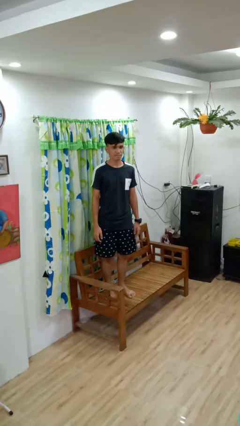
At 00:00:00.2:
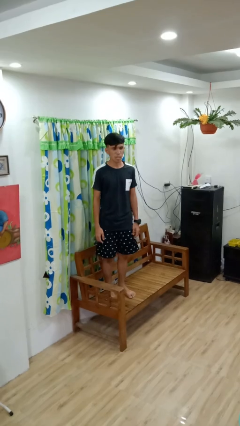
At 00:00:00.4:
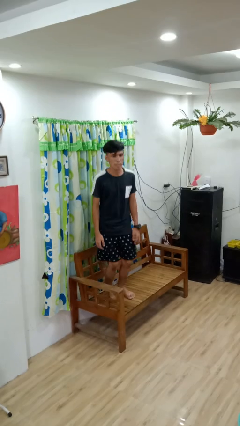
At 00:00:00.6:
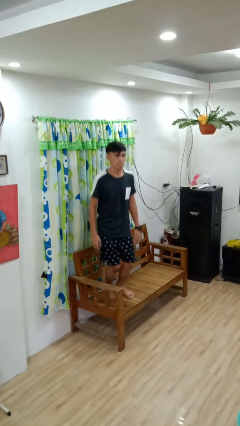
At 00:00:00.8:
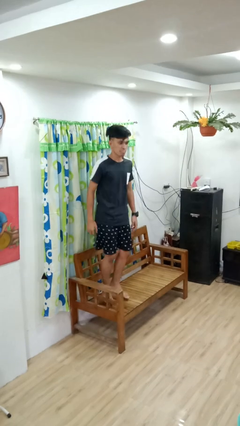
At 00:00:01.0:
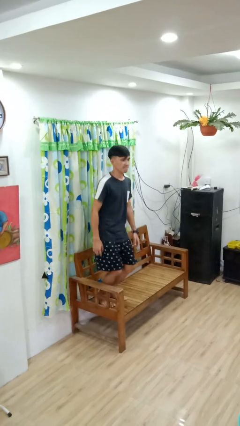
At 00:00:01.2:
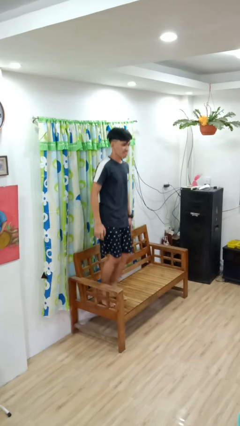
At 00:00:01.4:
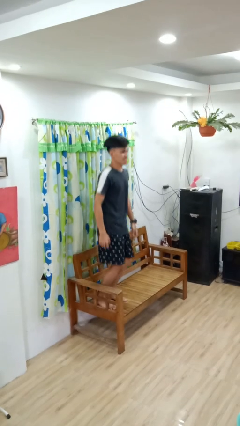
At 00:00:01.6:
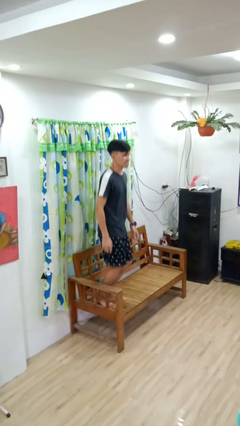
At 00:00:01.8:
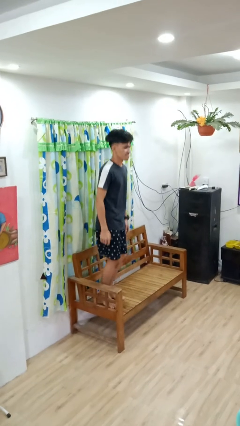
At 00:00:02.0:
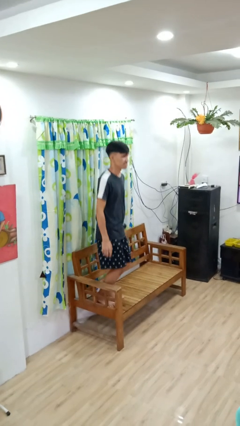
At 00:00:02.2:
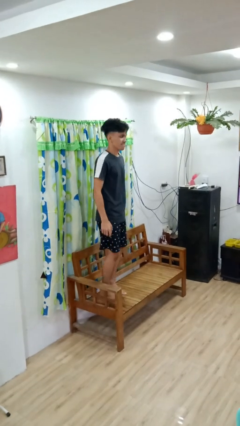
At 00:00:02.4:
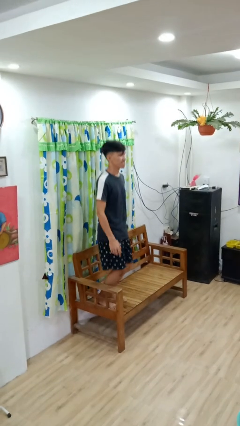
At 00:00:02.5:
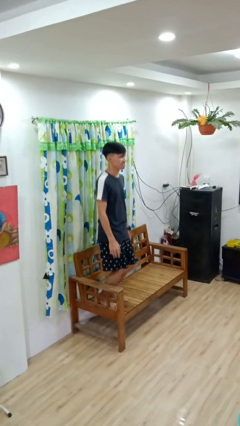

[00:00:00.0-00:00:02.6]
person jumps on couch

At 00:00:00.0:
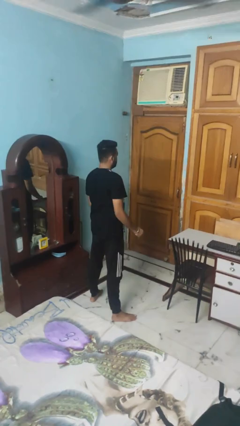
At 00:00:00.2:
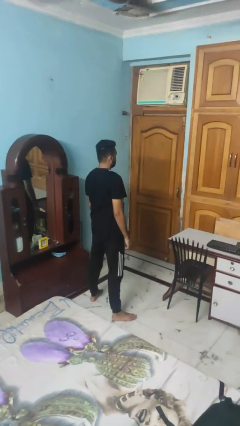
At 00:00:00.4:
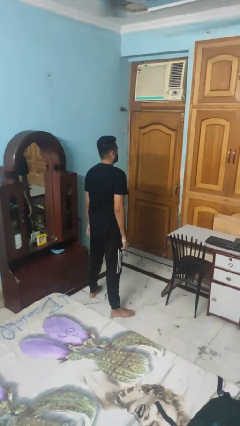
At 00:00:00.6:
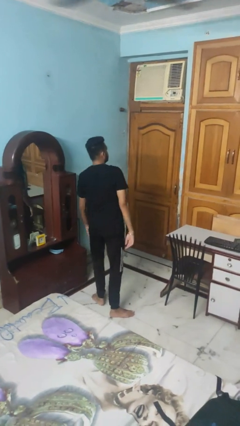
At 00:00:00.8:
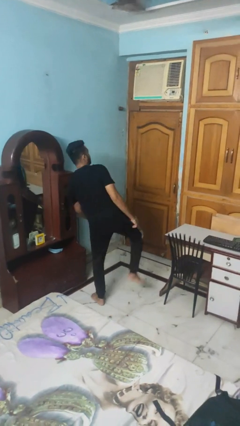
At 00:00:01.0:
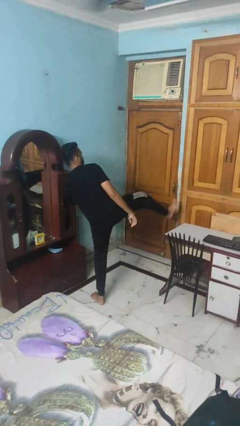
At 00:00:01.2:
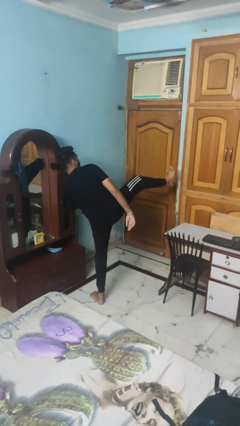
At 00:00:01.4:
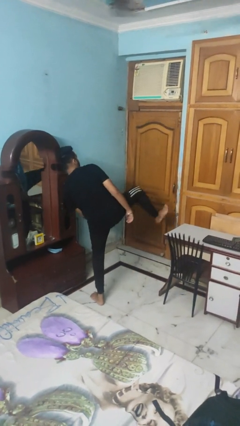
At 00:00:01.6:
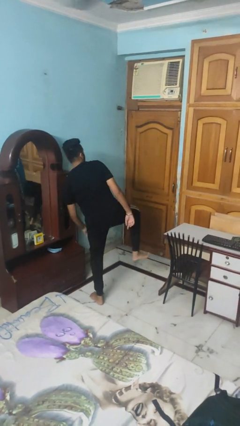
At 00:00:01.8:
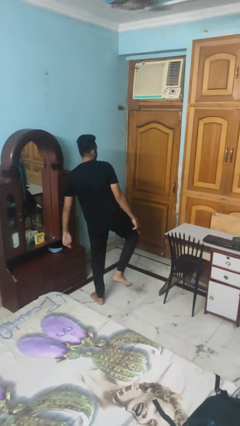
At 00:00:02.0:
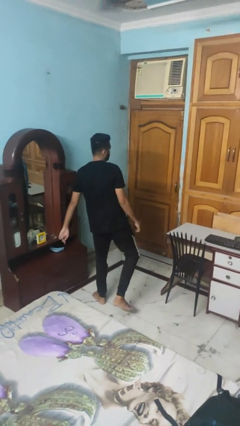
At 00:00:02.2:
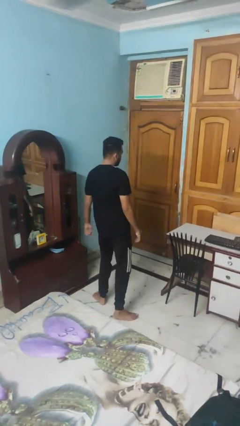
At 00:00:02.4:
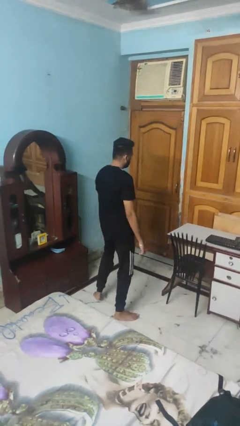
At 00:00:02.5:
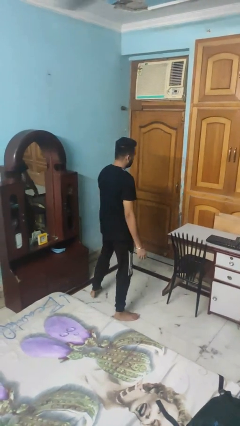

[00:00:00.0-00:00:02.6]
person karate kicks

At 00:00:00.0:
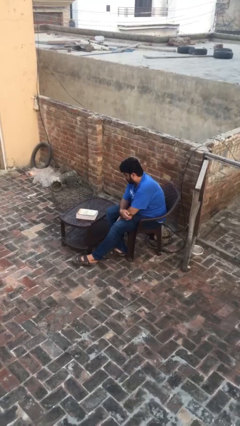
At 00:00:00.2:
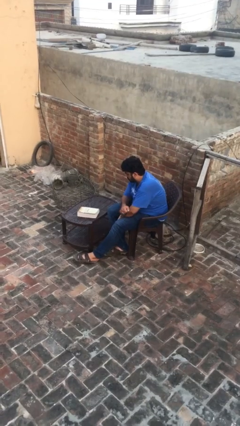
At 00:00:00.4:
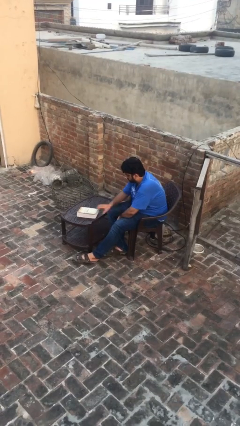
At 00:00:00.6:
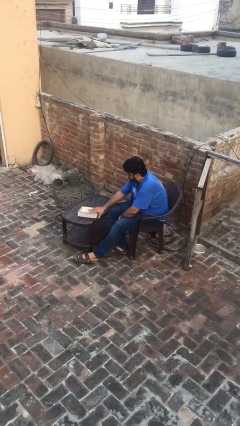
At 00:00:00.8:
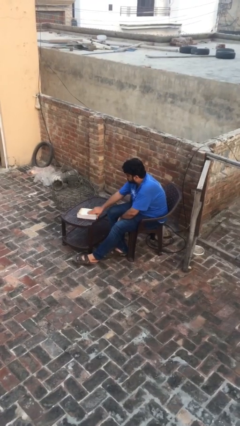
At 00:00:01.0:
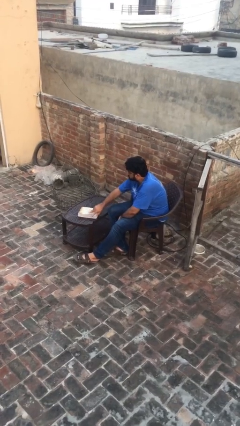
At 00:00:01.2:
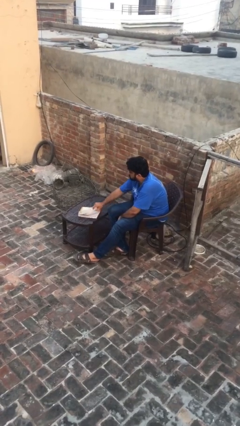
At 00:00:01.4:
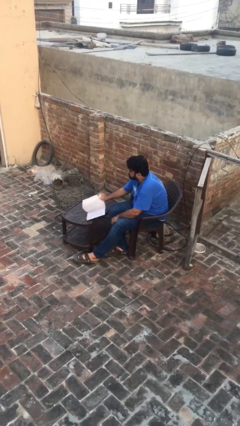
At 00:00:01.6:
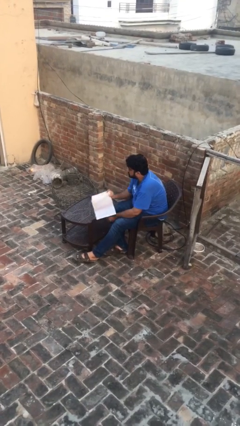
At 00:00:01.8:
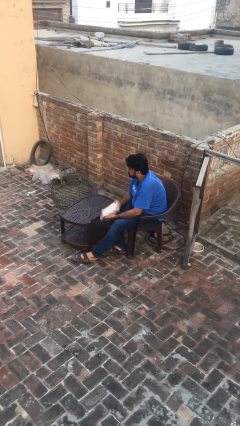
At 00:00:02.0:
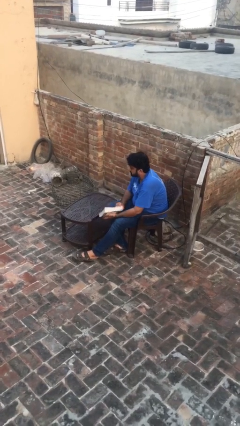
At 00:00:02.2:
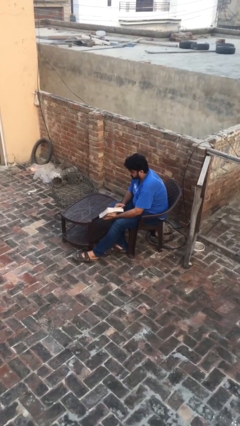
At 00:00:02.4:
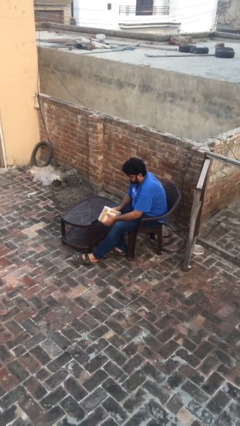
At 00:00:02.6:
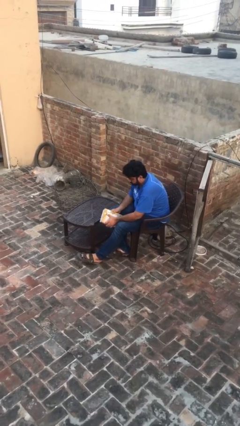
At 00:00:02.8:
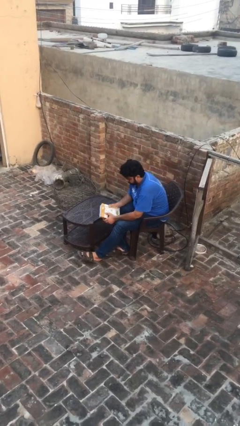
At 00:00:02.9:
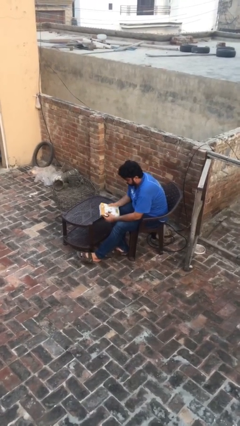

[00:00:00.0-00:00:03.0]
person picks up object from table

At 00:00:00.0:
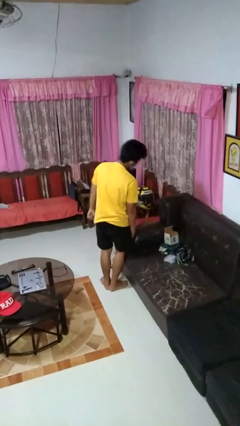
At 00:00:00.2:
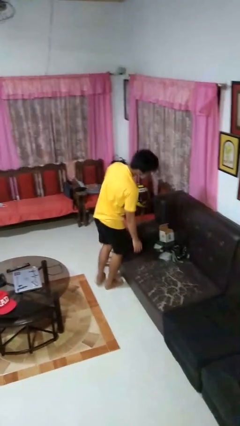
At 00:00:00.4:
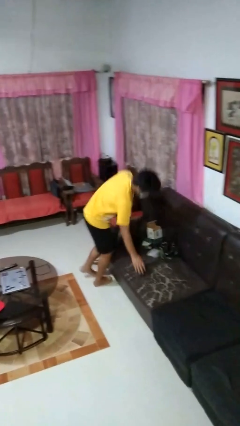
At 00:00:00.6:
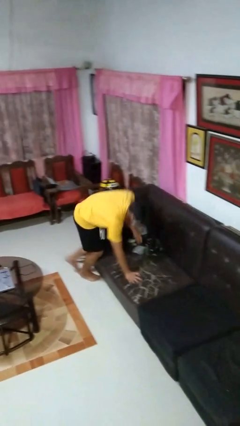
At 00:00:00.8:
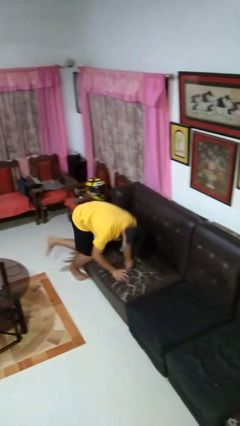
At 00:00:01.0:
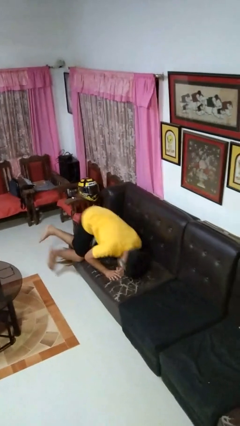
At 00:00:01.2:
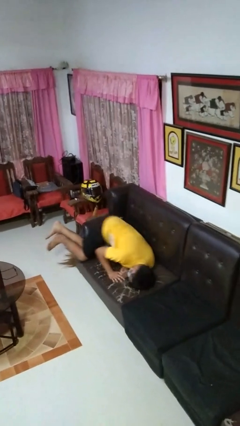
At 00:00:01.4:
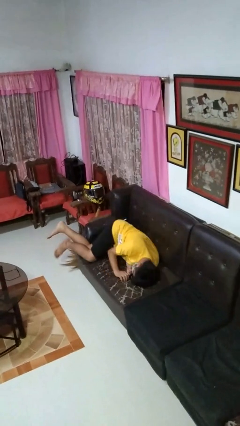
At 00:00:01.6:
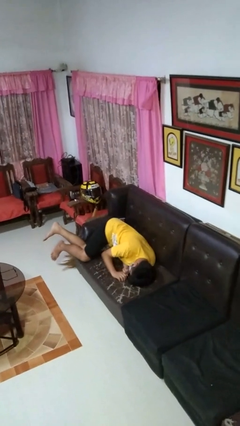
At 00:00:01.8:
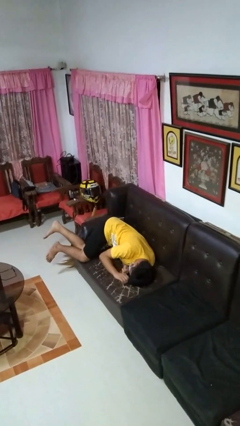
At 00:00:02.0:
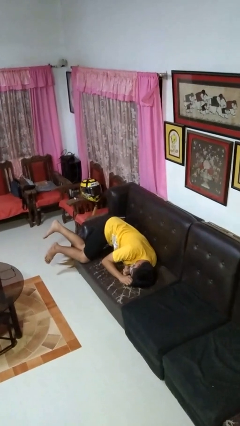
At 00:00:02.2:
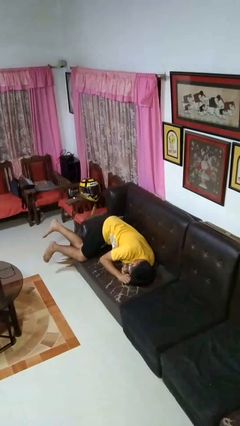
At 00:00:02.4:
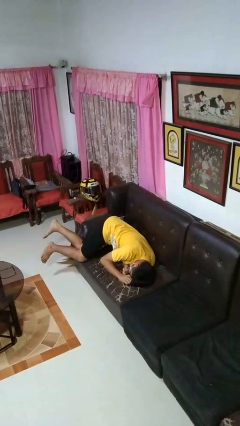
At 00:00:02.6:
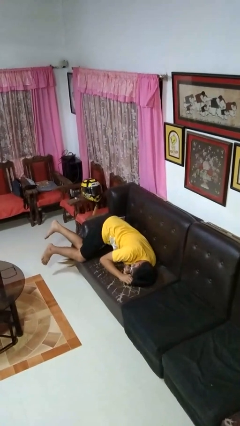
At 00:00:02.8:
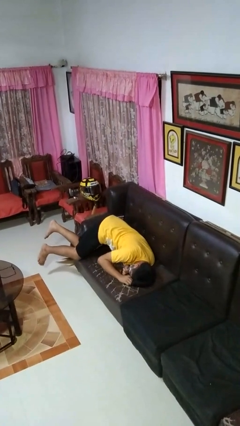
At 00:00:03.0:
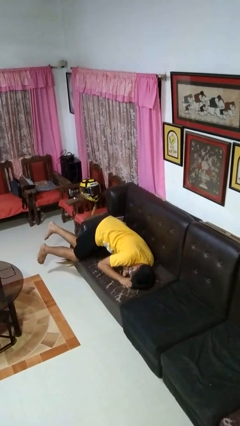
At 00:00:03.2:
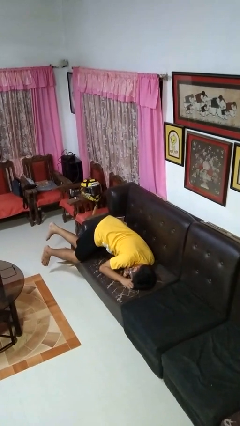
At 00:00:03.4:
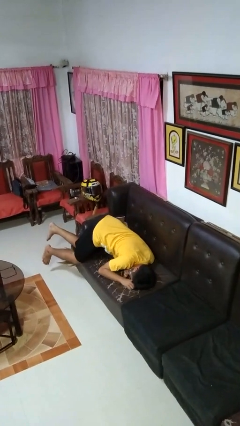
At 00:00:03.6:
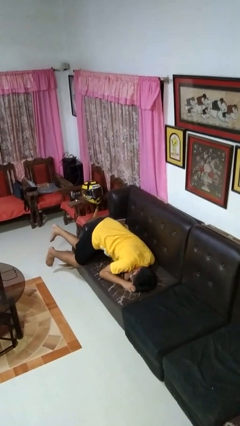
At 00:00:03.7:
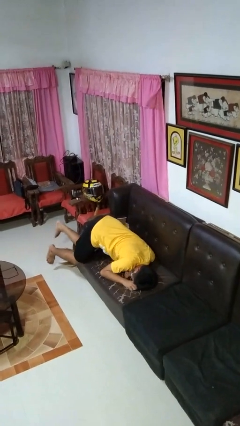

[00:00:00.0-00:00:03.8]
person lies down on couch

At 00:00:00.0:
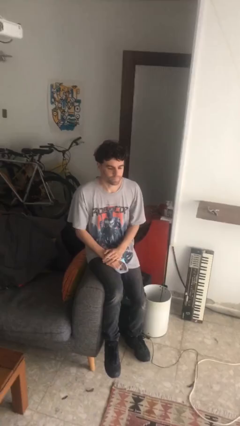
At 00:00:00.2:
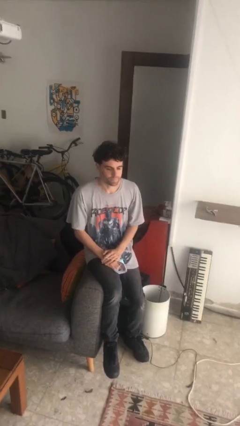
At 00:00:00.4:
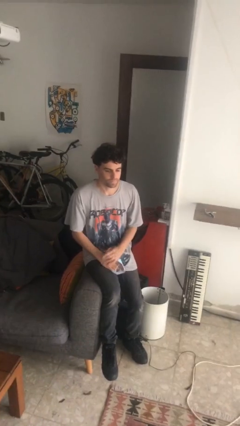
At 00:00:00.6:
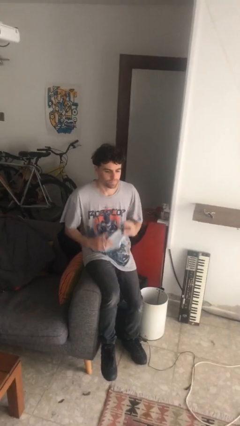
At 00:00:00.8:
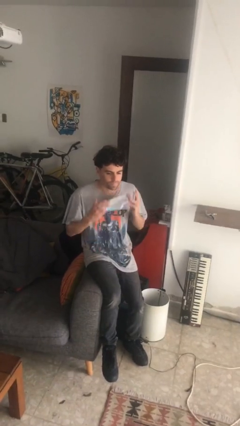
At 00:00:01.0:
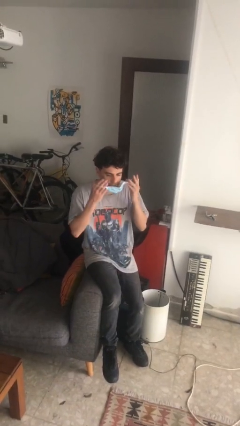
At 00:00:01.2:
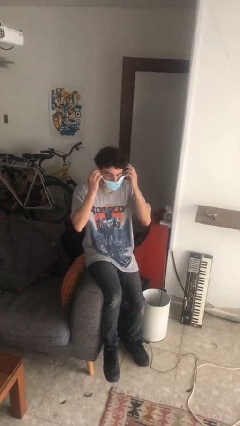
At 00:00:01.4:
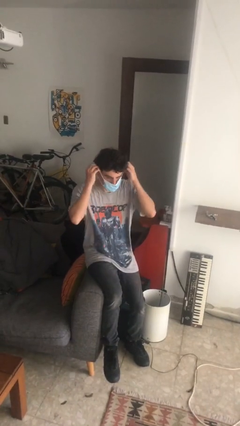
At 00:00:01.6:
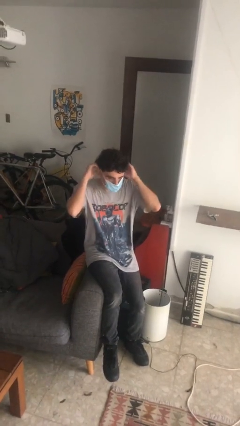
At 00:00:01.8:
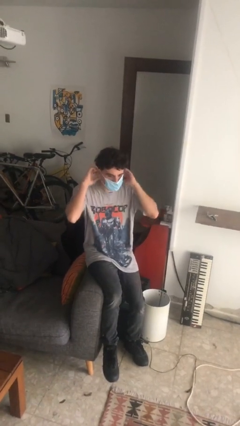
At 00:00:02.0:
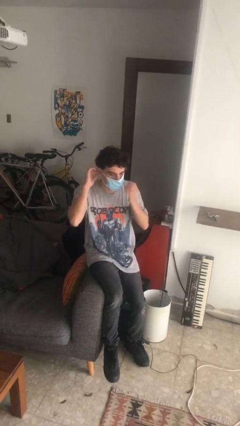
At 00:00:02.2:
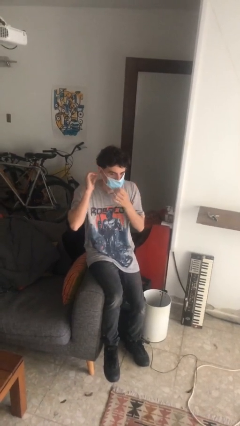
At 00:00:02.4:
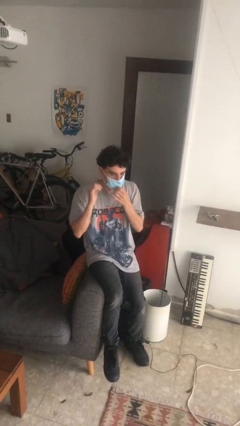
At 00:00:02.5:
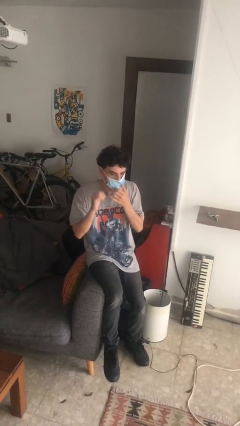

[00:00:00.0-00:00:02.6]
person puts on facemask

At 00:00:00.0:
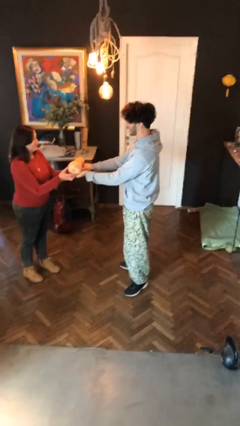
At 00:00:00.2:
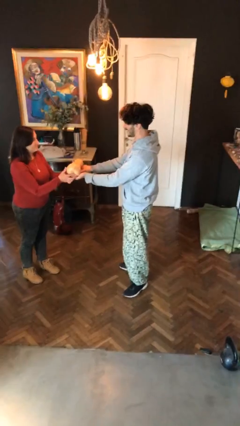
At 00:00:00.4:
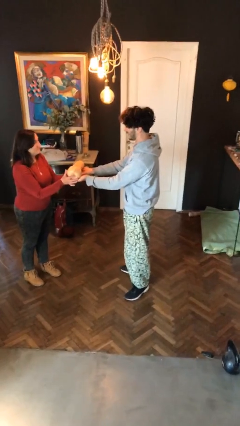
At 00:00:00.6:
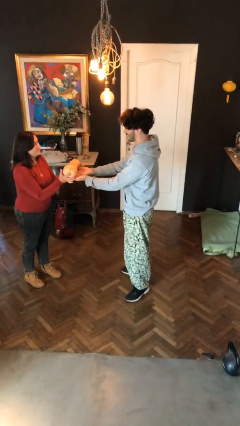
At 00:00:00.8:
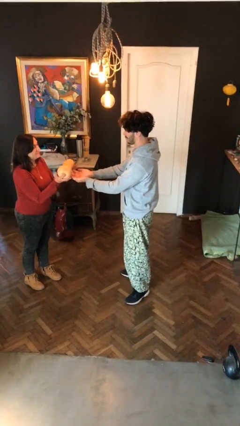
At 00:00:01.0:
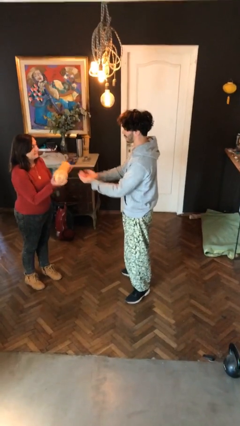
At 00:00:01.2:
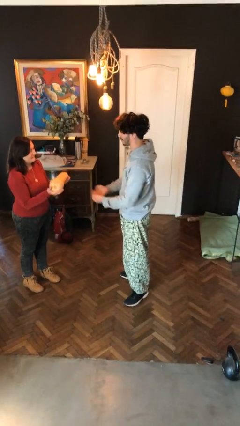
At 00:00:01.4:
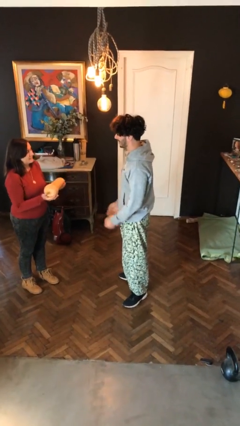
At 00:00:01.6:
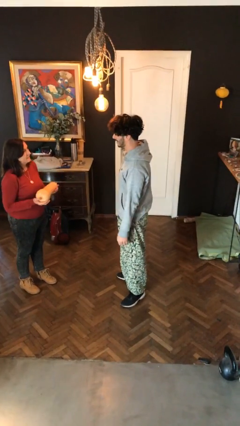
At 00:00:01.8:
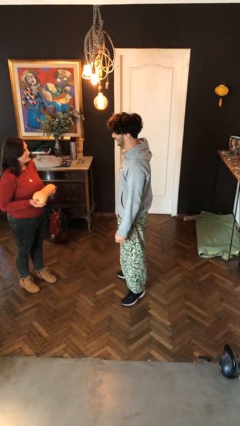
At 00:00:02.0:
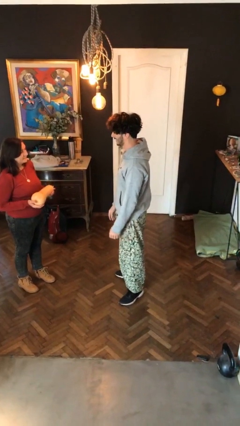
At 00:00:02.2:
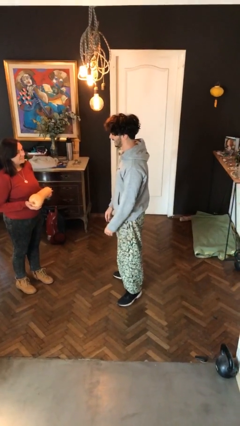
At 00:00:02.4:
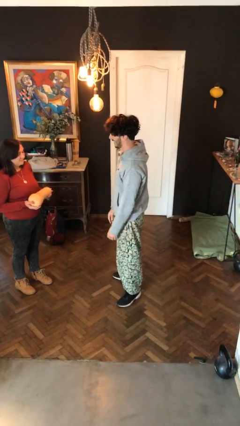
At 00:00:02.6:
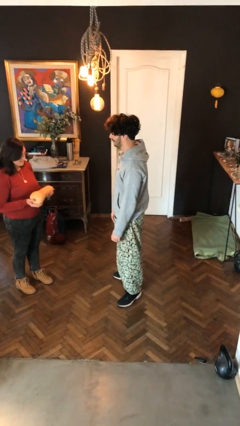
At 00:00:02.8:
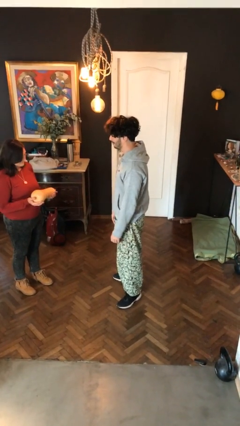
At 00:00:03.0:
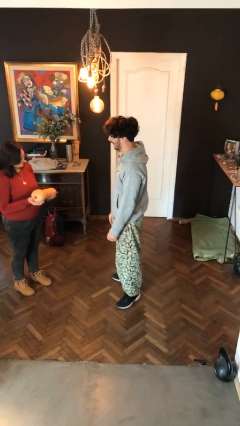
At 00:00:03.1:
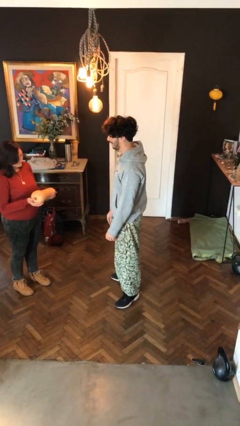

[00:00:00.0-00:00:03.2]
person transfers object to person
